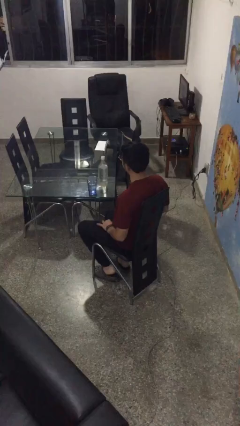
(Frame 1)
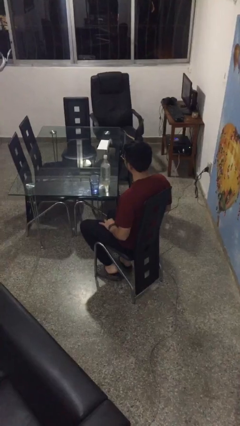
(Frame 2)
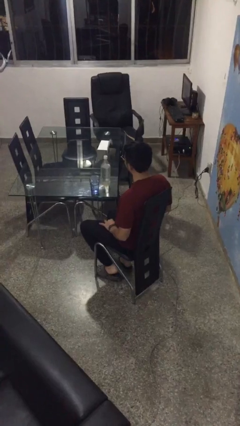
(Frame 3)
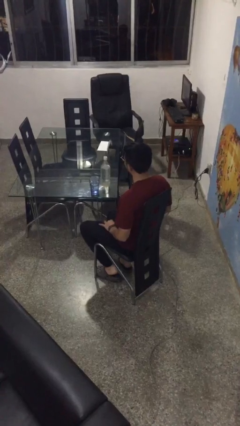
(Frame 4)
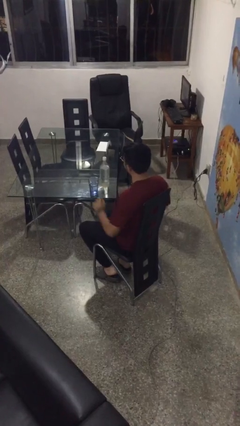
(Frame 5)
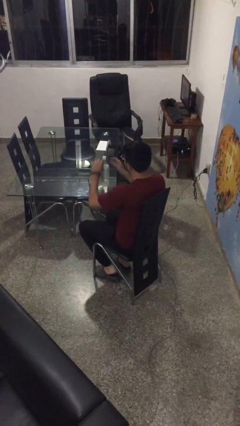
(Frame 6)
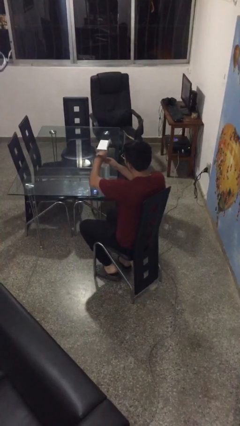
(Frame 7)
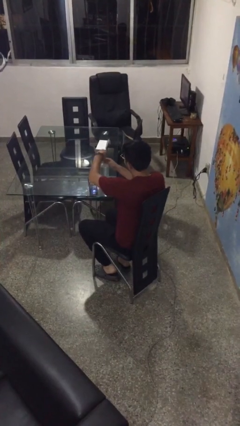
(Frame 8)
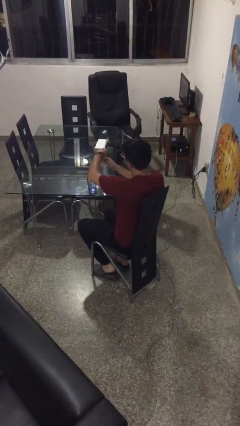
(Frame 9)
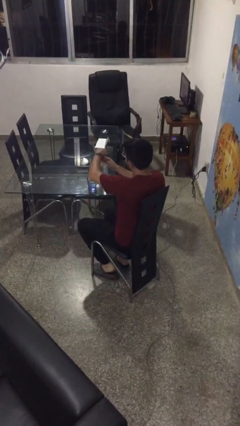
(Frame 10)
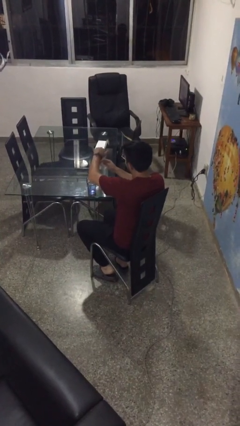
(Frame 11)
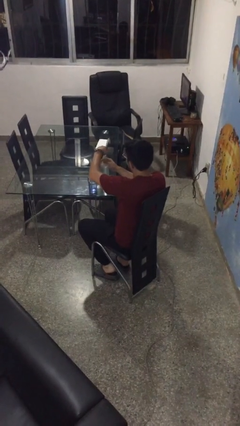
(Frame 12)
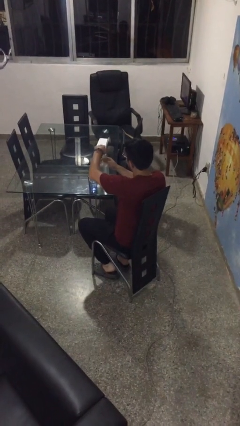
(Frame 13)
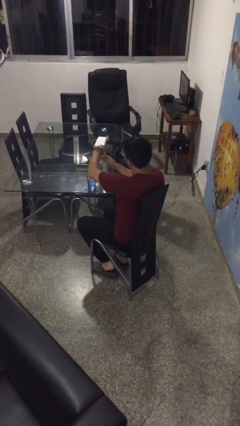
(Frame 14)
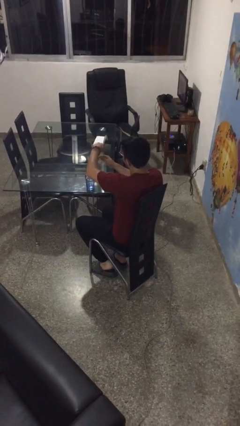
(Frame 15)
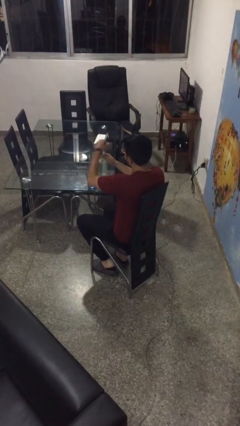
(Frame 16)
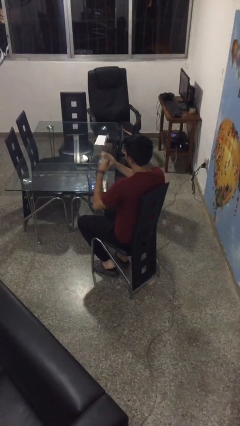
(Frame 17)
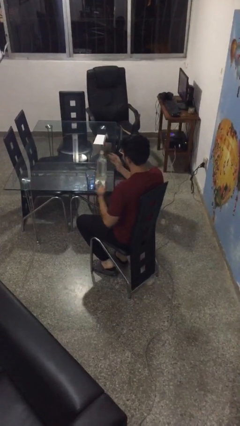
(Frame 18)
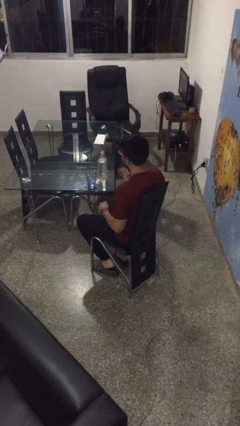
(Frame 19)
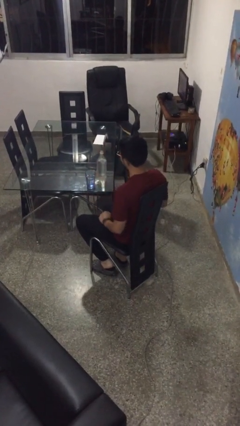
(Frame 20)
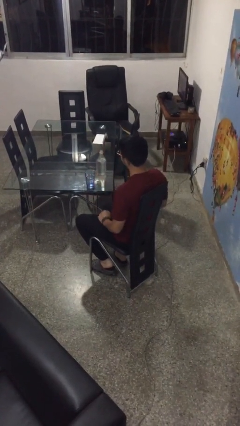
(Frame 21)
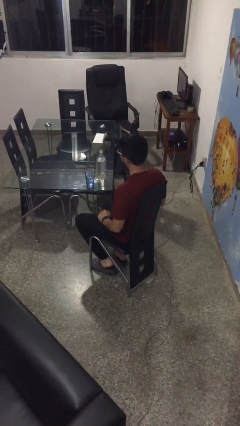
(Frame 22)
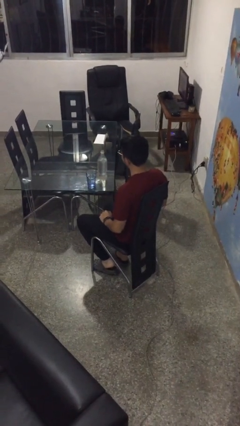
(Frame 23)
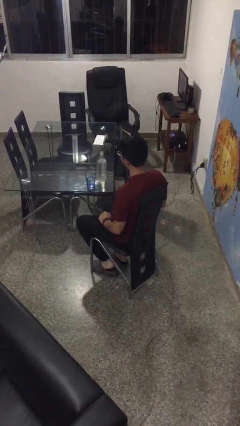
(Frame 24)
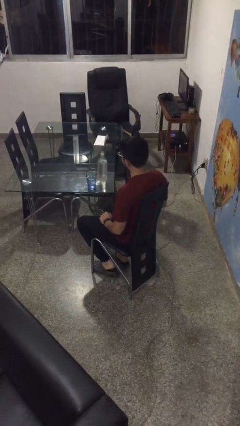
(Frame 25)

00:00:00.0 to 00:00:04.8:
person unscrews lid from bottle

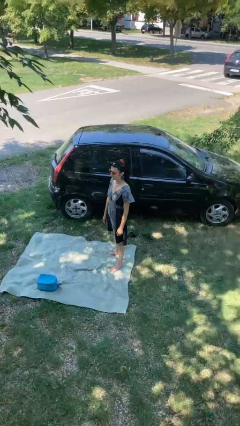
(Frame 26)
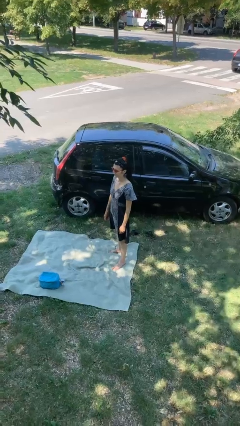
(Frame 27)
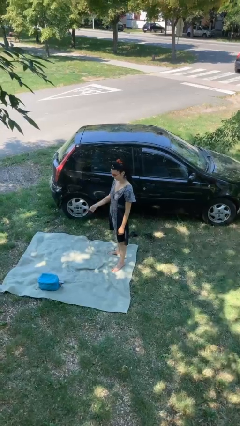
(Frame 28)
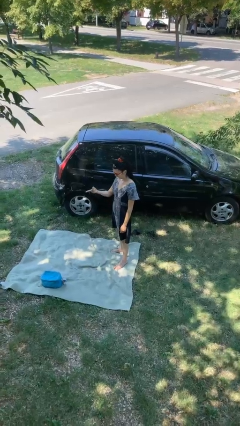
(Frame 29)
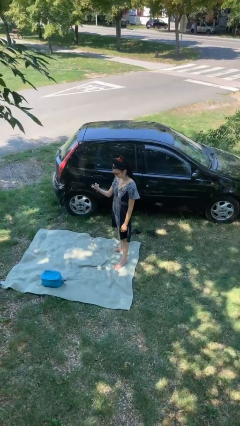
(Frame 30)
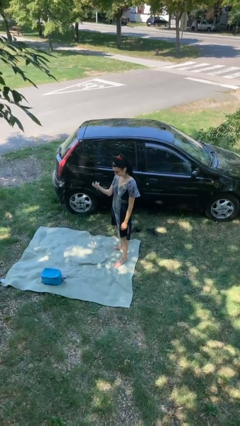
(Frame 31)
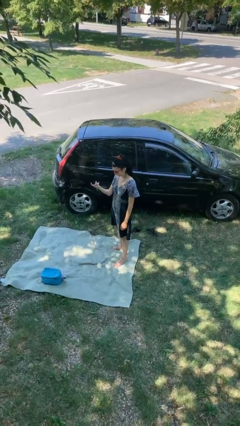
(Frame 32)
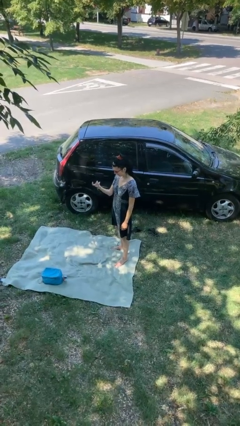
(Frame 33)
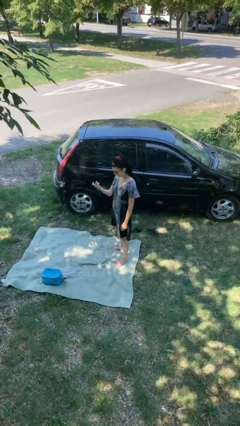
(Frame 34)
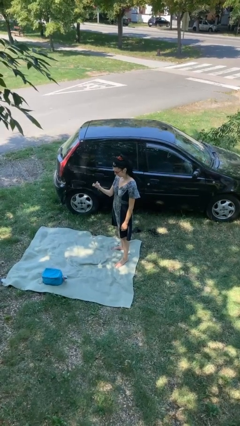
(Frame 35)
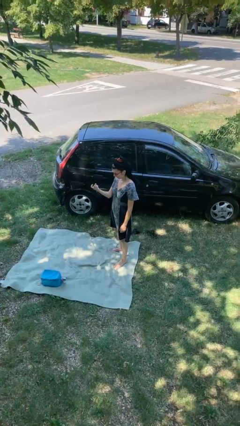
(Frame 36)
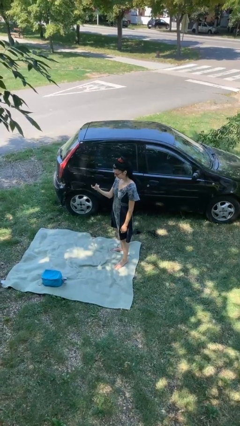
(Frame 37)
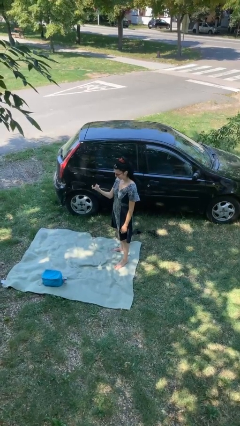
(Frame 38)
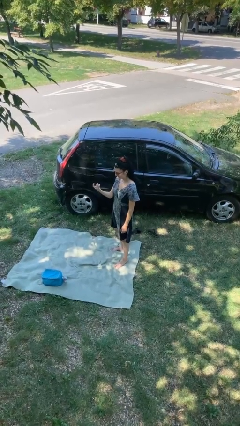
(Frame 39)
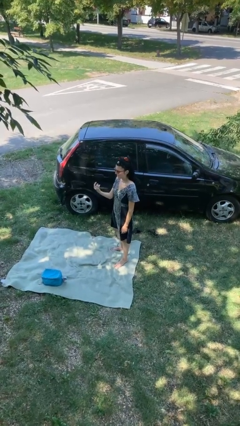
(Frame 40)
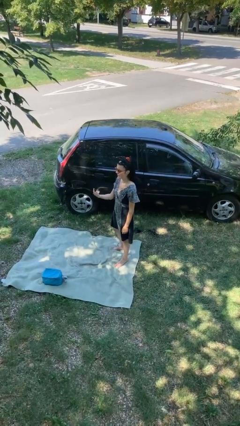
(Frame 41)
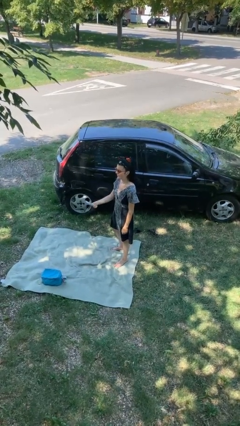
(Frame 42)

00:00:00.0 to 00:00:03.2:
person gestures come here

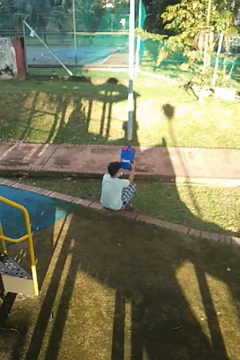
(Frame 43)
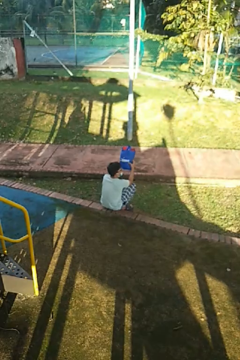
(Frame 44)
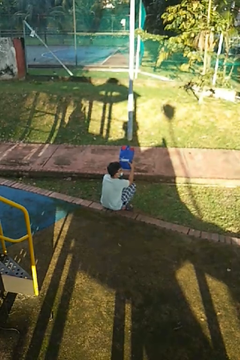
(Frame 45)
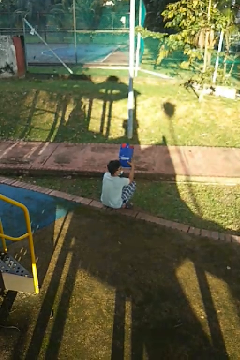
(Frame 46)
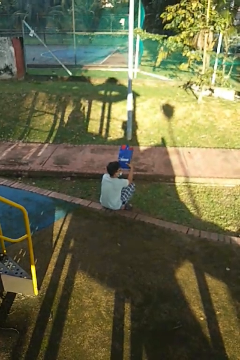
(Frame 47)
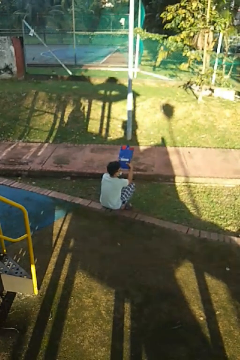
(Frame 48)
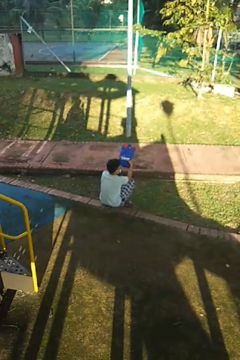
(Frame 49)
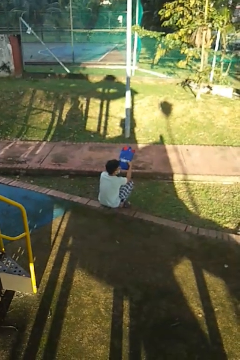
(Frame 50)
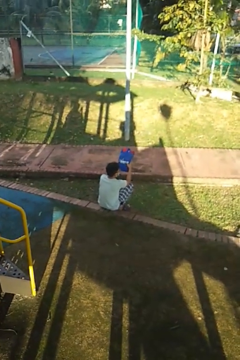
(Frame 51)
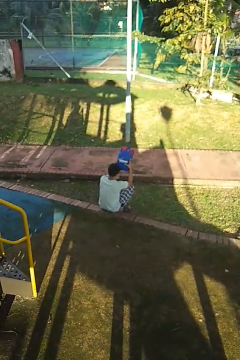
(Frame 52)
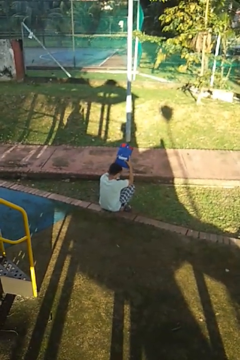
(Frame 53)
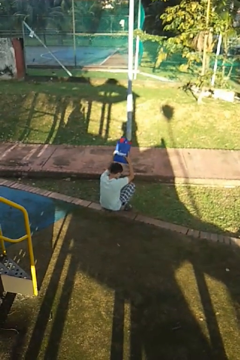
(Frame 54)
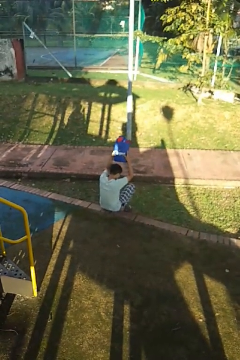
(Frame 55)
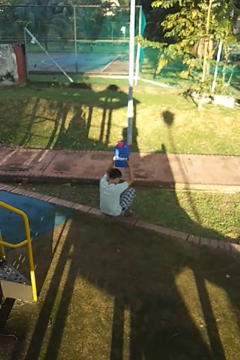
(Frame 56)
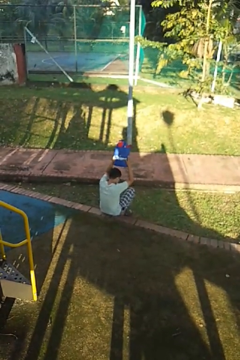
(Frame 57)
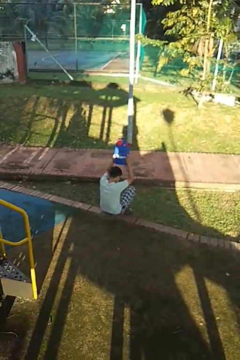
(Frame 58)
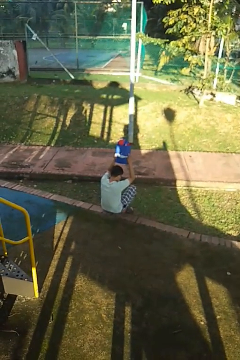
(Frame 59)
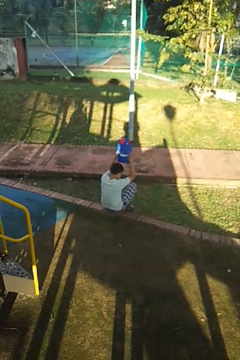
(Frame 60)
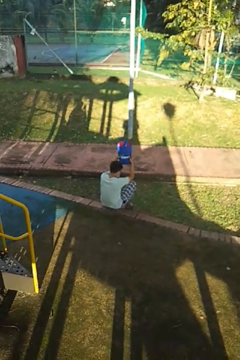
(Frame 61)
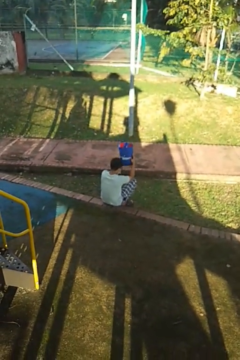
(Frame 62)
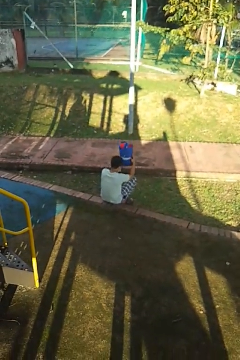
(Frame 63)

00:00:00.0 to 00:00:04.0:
person holds object above head

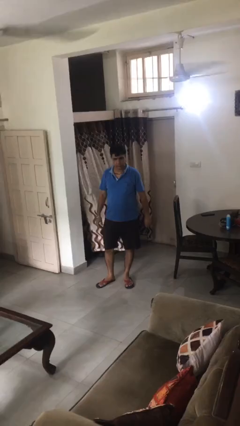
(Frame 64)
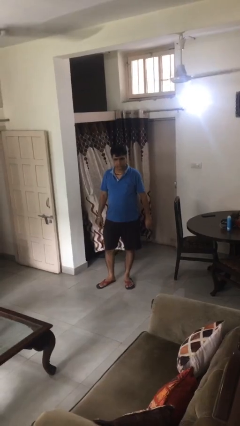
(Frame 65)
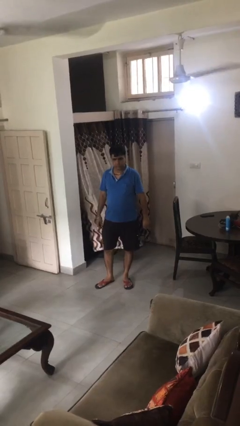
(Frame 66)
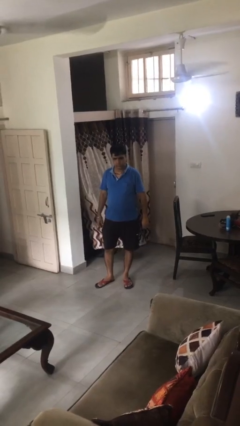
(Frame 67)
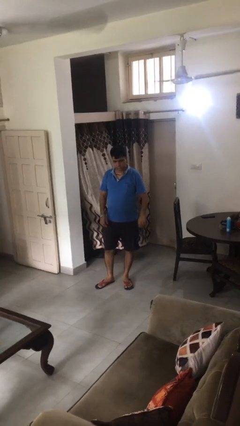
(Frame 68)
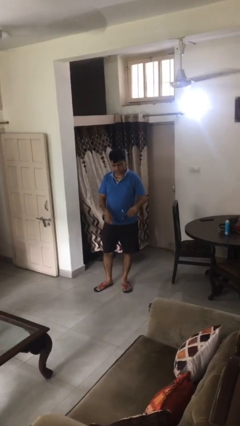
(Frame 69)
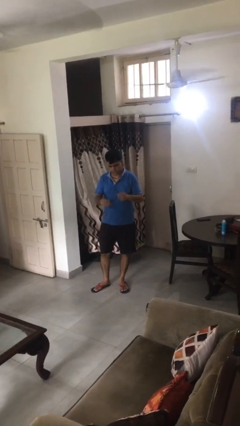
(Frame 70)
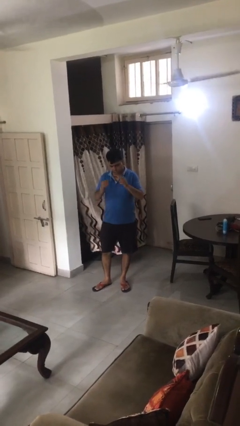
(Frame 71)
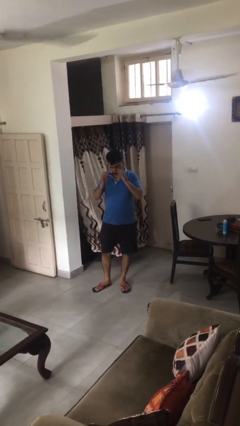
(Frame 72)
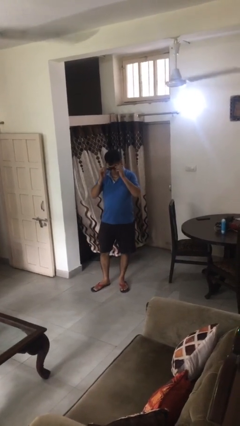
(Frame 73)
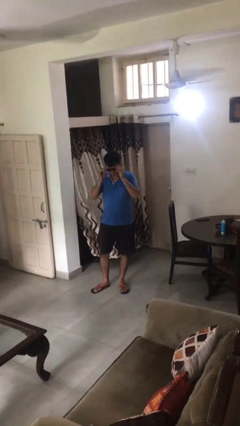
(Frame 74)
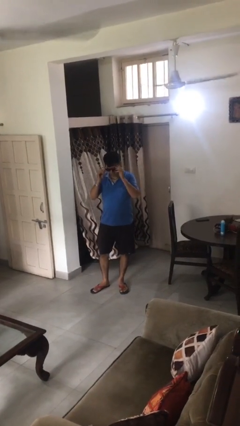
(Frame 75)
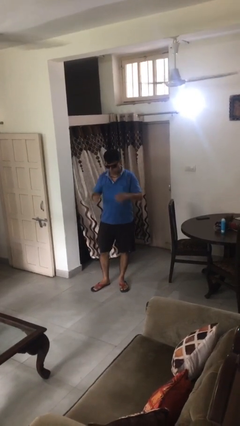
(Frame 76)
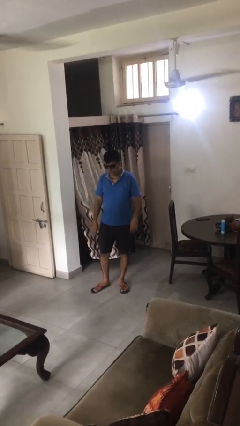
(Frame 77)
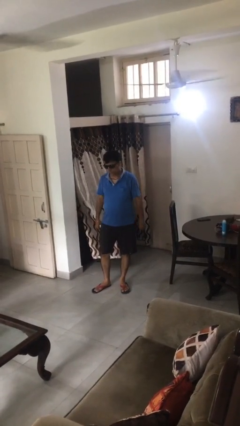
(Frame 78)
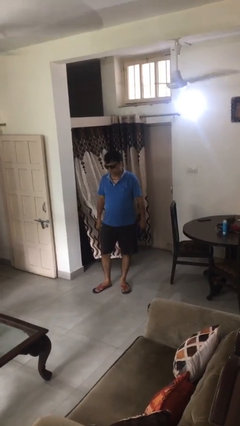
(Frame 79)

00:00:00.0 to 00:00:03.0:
person puts on sunglasses

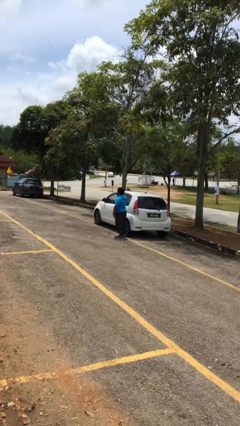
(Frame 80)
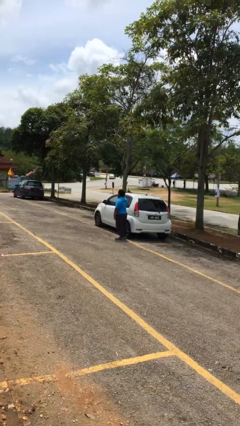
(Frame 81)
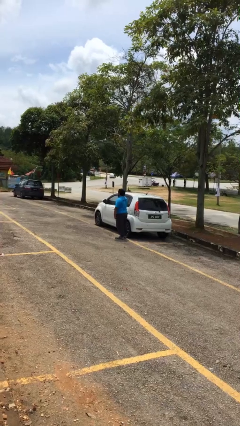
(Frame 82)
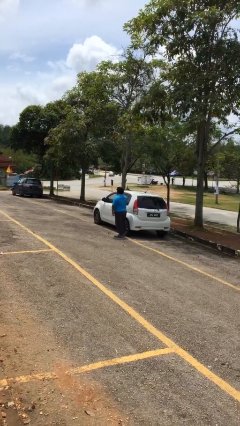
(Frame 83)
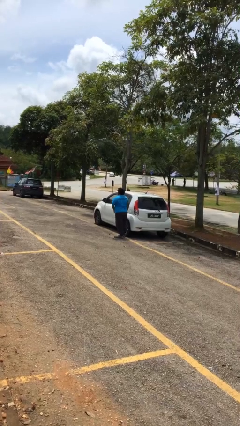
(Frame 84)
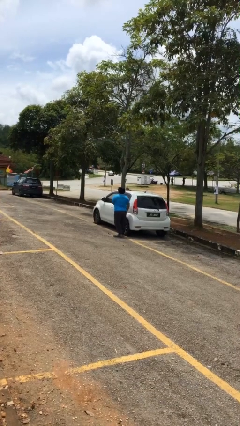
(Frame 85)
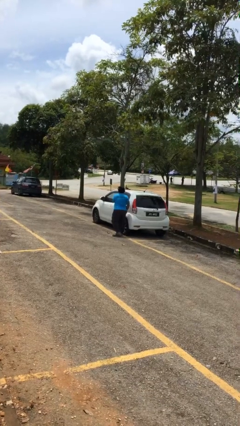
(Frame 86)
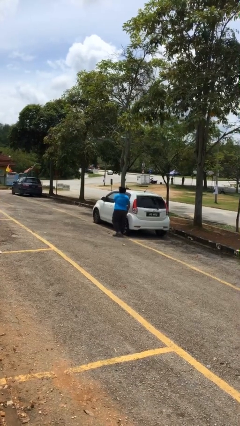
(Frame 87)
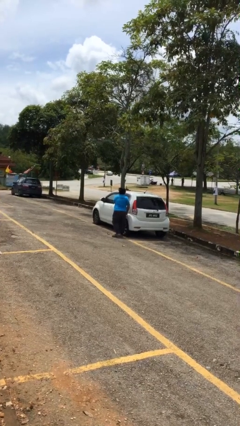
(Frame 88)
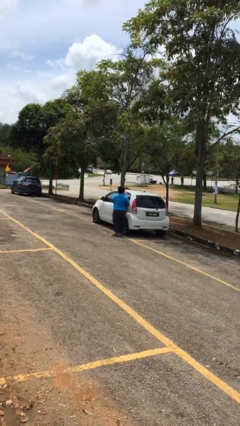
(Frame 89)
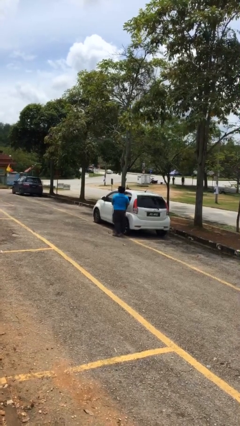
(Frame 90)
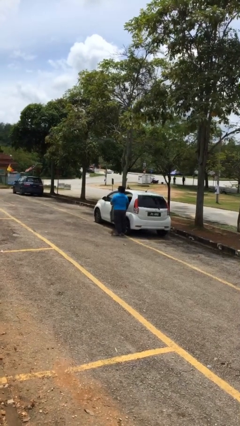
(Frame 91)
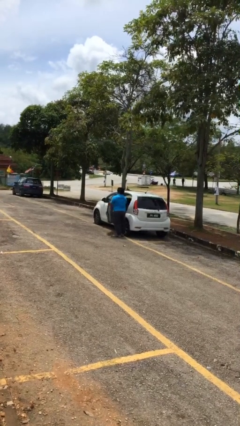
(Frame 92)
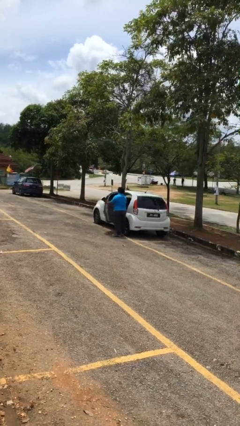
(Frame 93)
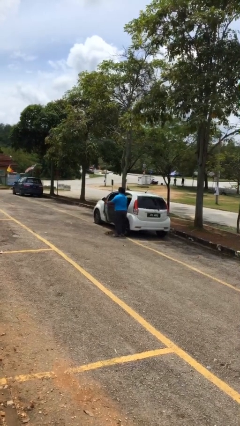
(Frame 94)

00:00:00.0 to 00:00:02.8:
person opens car door
